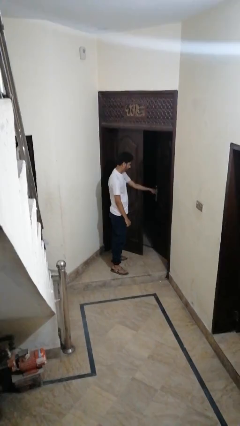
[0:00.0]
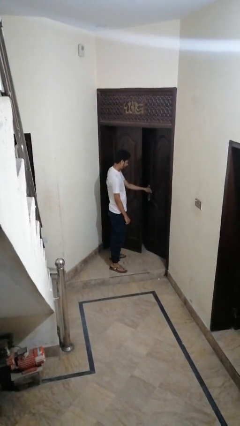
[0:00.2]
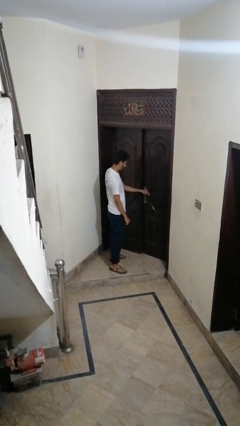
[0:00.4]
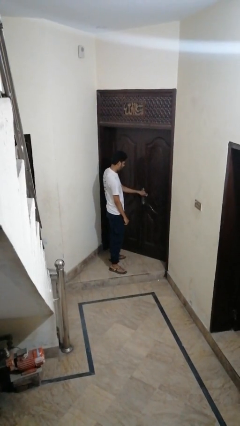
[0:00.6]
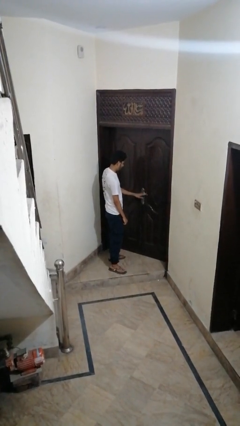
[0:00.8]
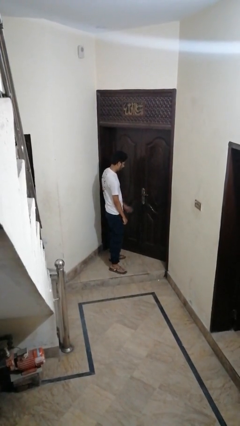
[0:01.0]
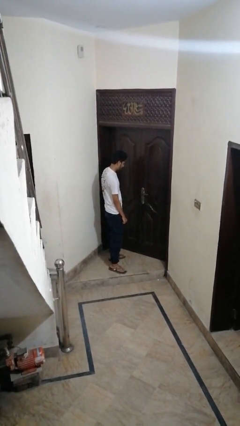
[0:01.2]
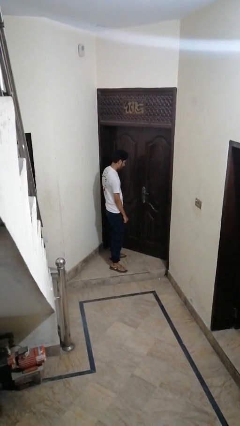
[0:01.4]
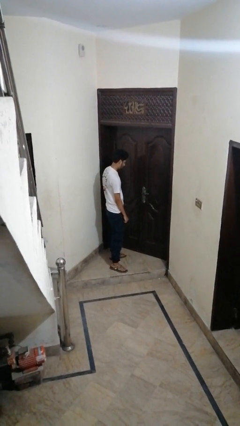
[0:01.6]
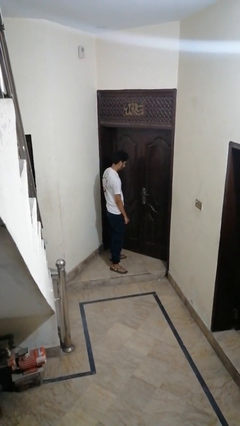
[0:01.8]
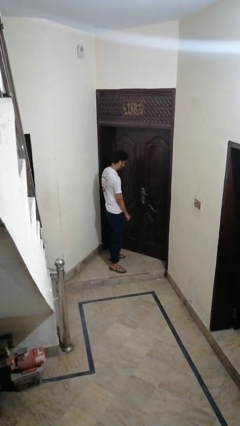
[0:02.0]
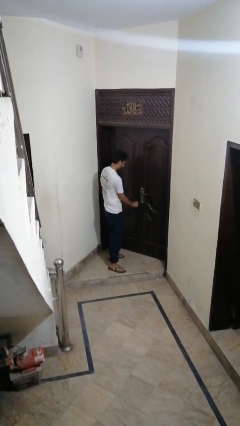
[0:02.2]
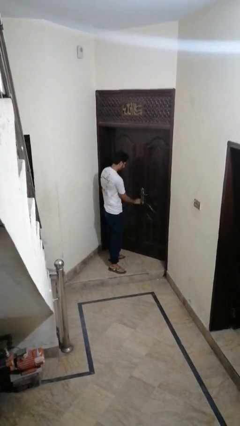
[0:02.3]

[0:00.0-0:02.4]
person closes facility door

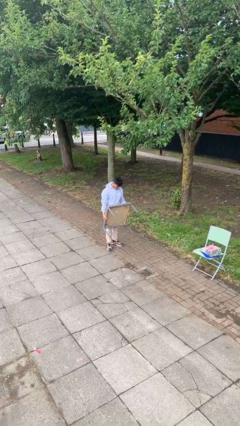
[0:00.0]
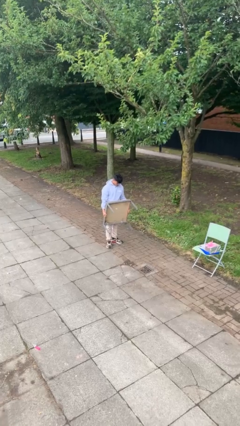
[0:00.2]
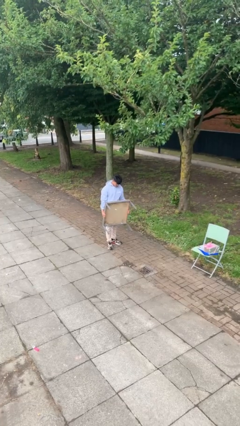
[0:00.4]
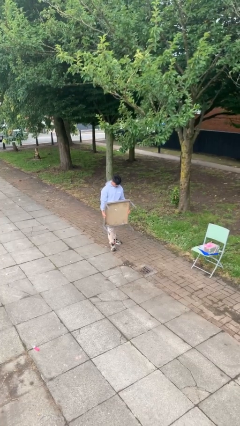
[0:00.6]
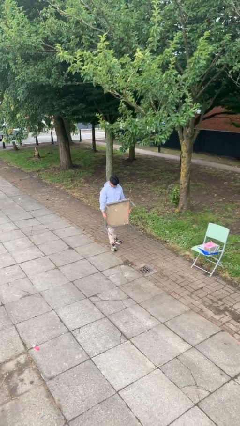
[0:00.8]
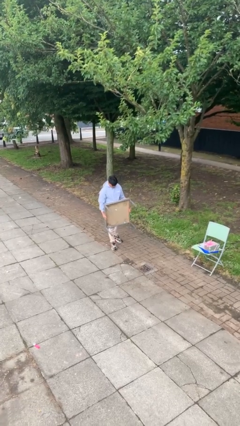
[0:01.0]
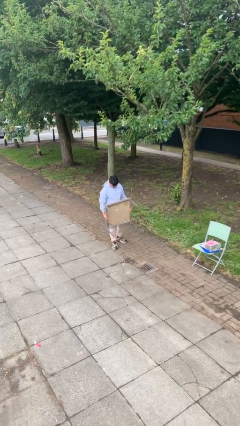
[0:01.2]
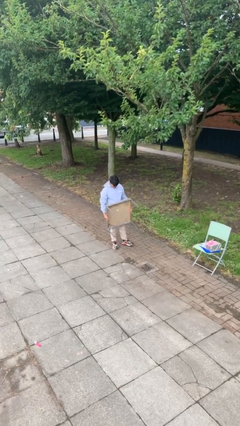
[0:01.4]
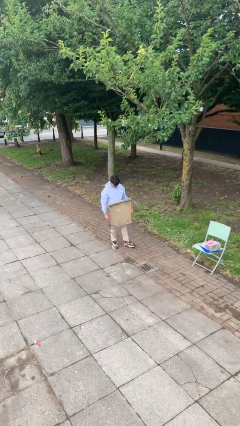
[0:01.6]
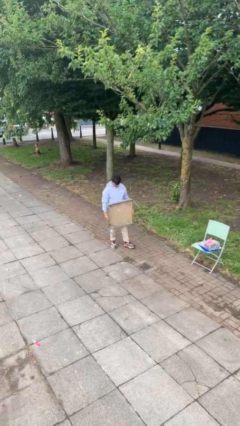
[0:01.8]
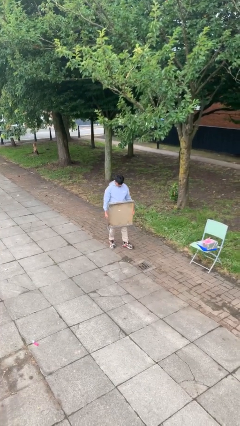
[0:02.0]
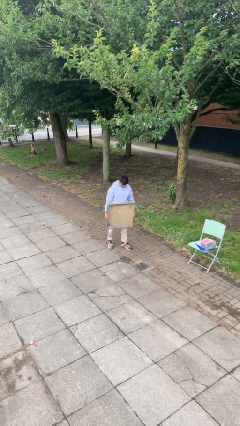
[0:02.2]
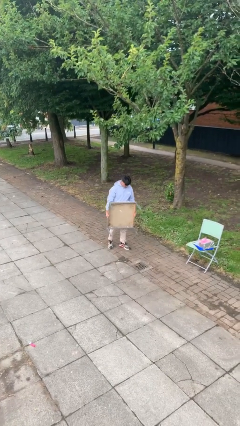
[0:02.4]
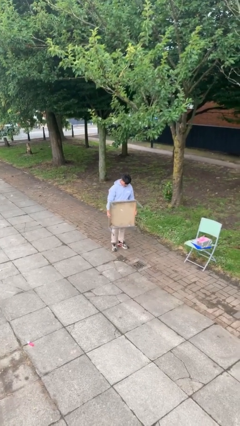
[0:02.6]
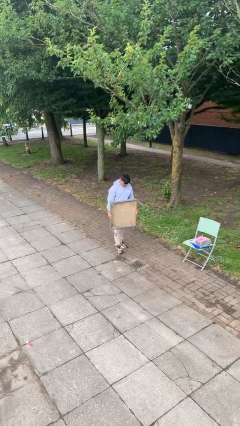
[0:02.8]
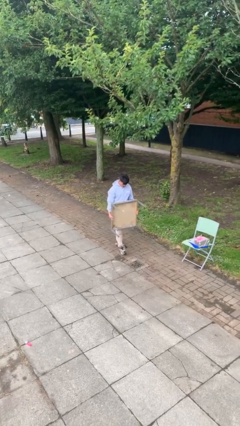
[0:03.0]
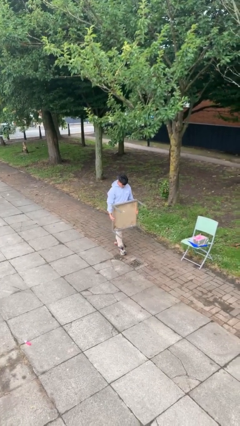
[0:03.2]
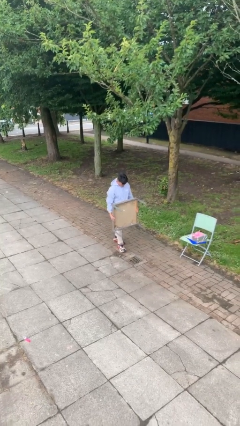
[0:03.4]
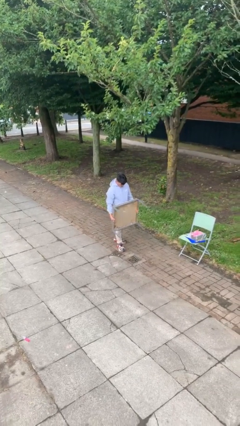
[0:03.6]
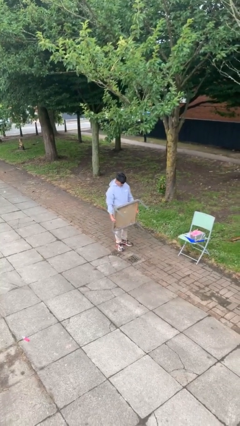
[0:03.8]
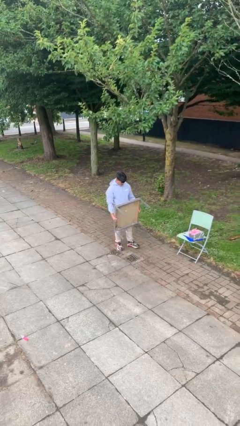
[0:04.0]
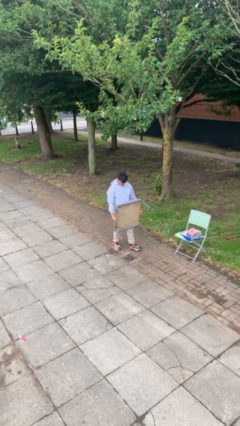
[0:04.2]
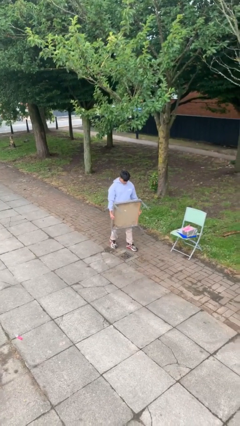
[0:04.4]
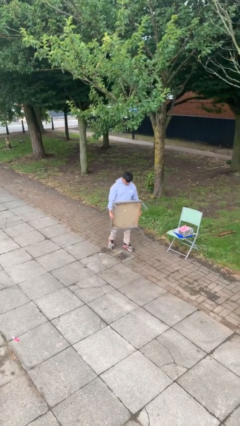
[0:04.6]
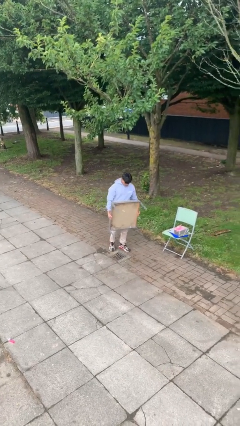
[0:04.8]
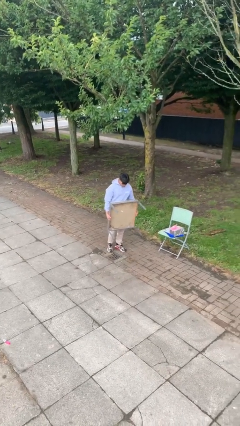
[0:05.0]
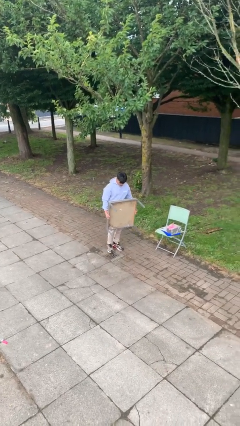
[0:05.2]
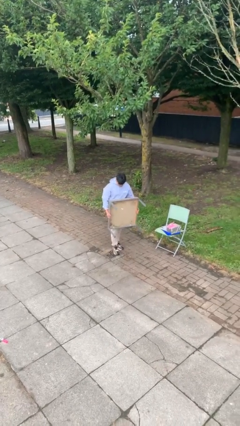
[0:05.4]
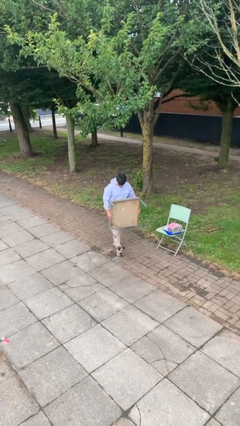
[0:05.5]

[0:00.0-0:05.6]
person carries heavy object

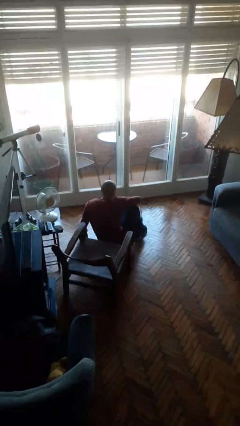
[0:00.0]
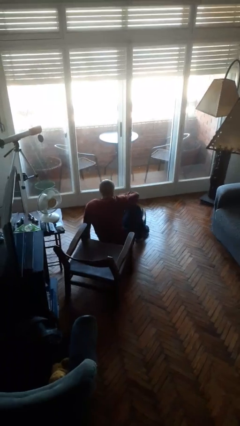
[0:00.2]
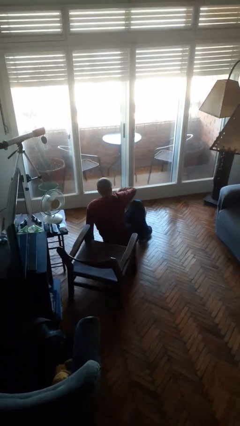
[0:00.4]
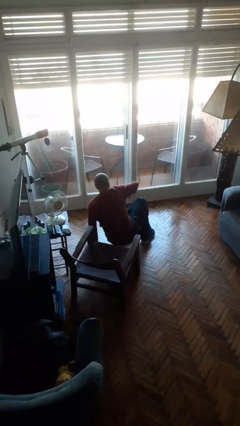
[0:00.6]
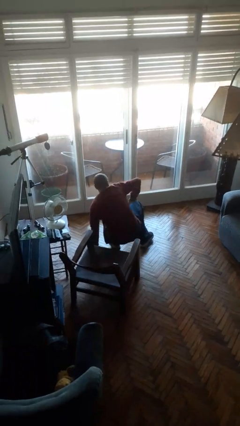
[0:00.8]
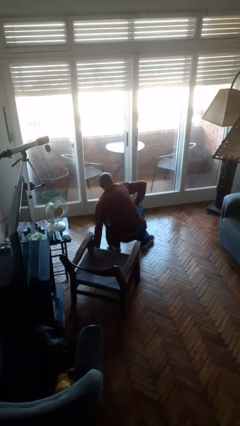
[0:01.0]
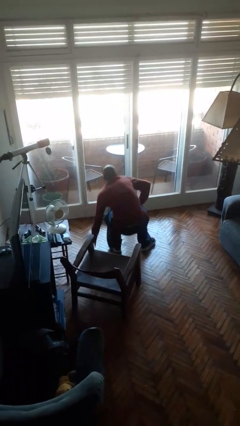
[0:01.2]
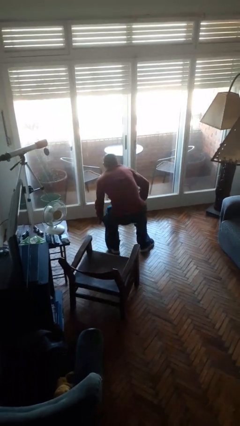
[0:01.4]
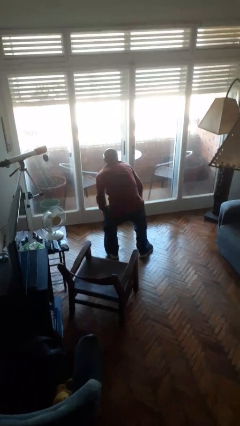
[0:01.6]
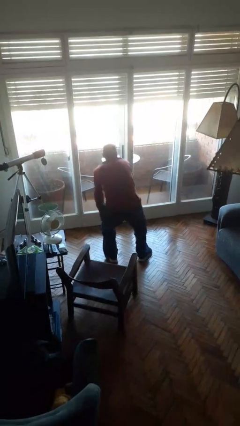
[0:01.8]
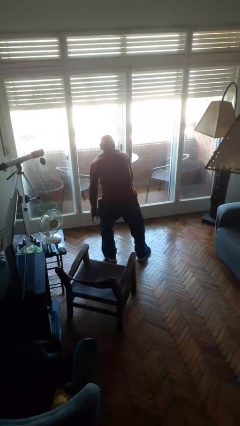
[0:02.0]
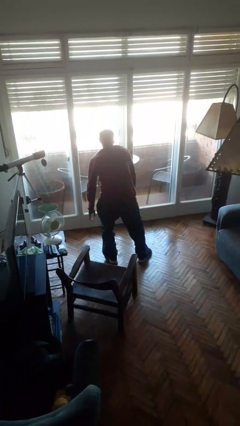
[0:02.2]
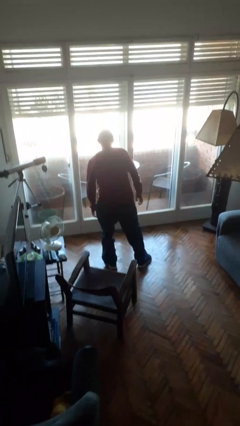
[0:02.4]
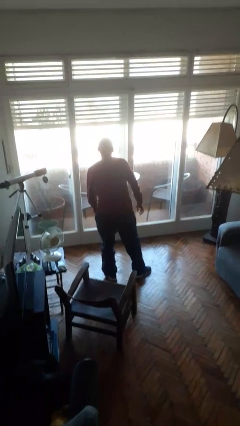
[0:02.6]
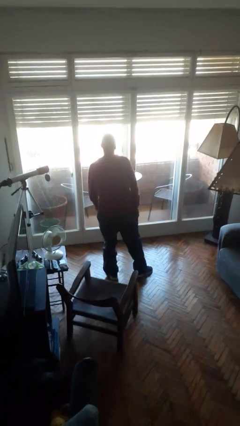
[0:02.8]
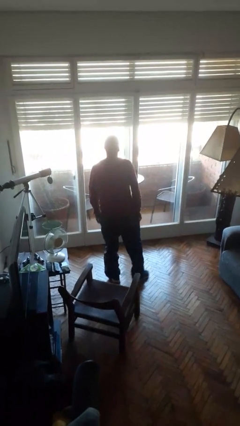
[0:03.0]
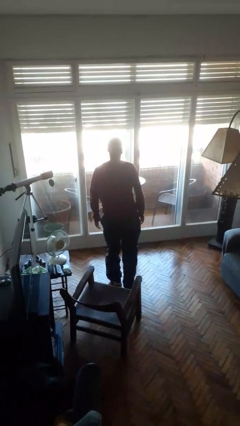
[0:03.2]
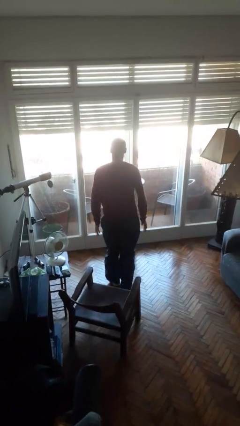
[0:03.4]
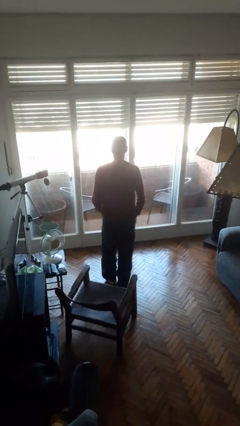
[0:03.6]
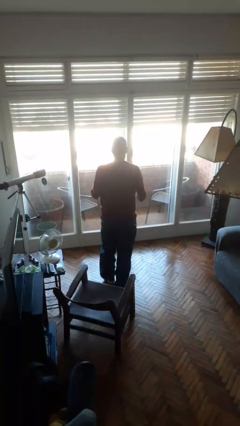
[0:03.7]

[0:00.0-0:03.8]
person stands up from floor

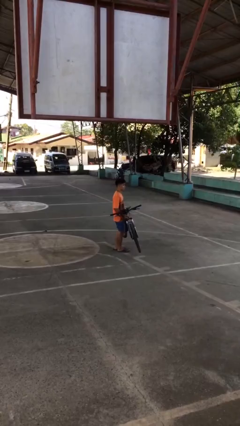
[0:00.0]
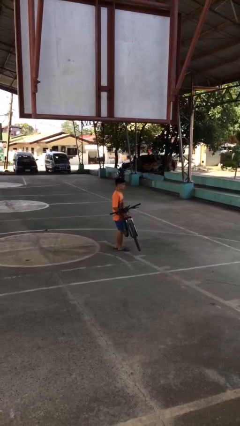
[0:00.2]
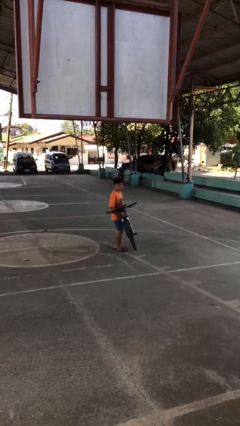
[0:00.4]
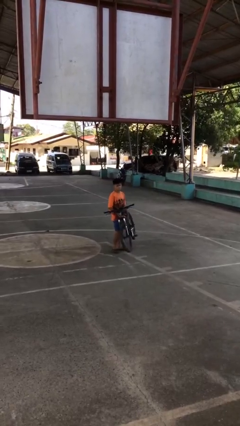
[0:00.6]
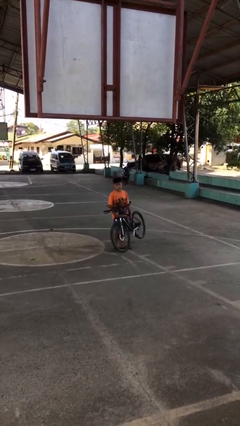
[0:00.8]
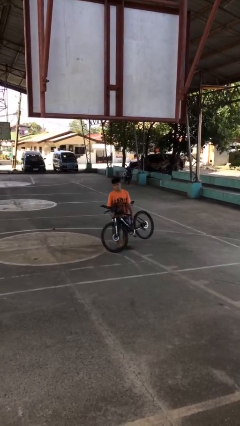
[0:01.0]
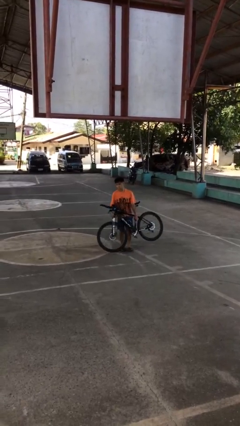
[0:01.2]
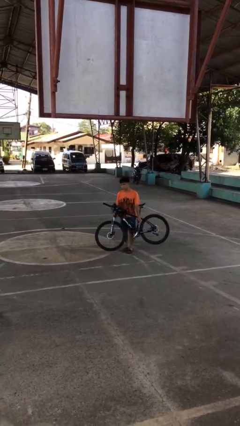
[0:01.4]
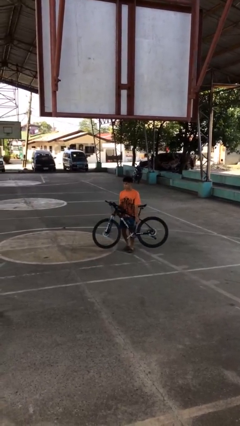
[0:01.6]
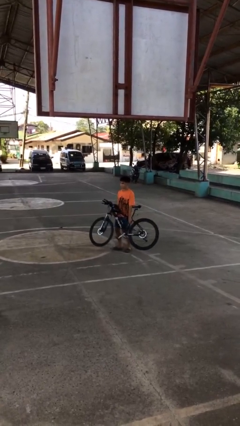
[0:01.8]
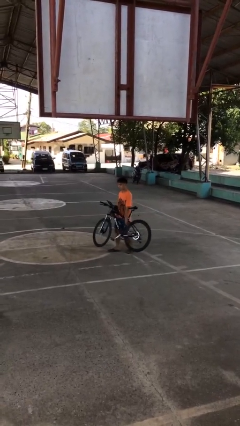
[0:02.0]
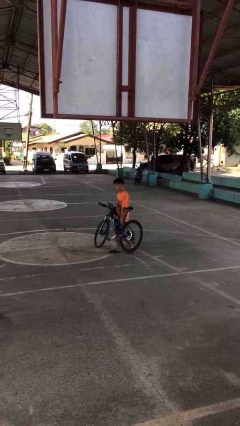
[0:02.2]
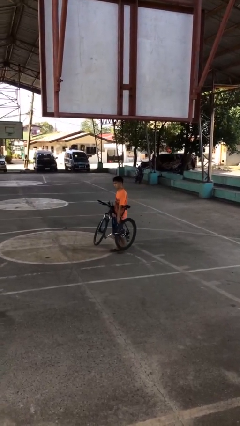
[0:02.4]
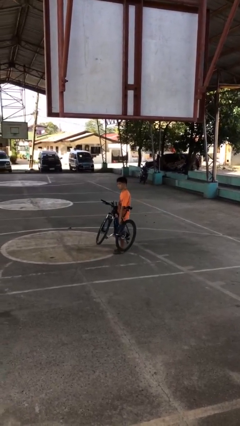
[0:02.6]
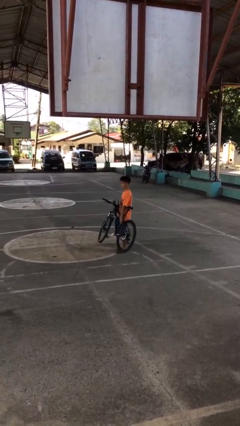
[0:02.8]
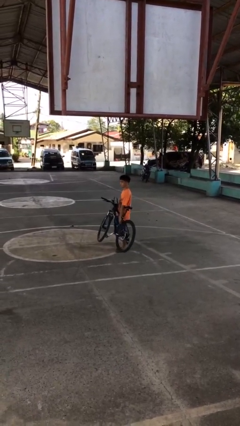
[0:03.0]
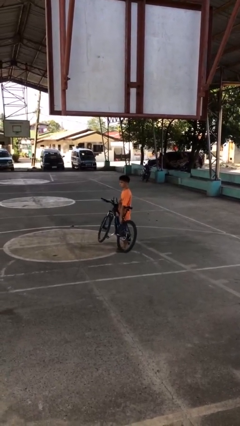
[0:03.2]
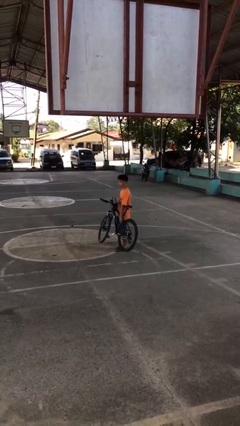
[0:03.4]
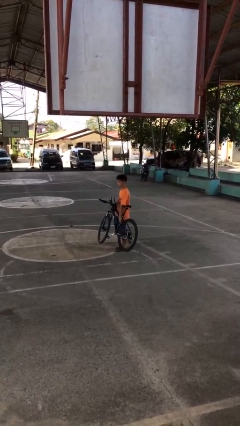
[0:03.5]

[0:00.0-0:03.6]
person carries bicycle

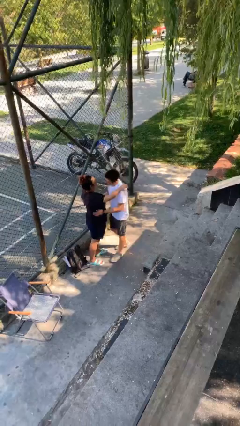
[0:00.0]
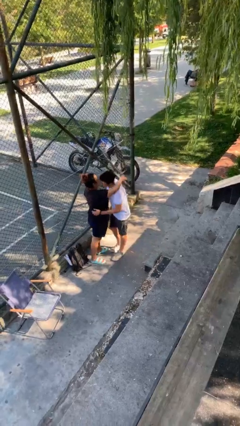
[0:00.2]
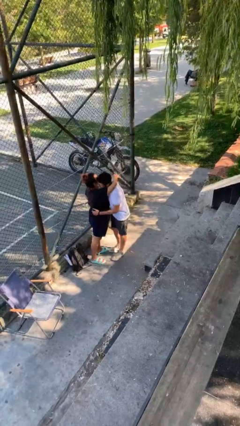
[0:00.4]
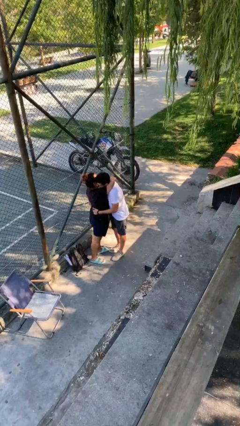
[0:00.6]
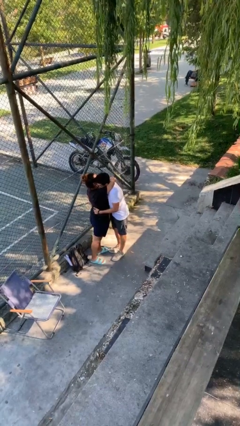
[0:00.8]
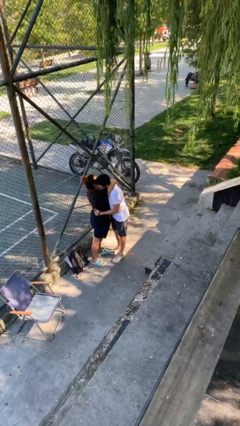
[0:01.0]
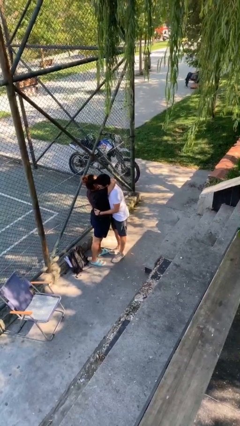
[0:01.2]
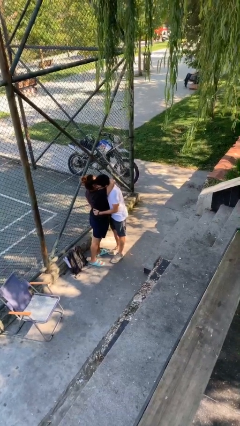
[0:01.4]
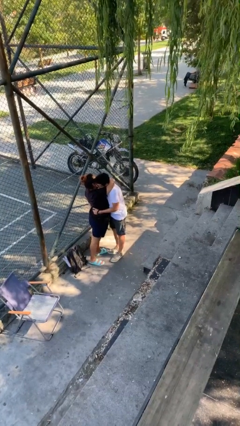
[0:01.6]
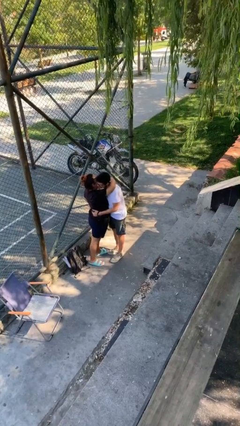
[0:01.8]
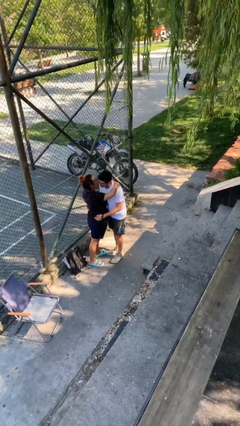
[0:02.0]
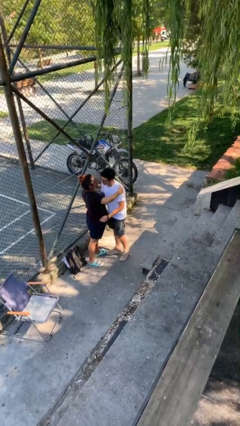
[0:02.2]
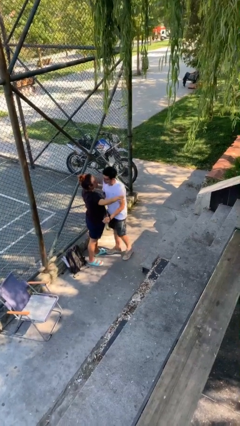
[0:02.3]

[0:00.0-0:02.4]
person embraces person
